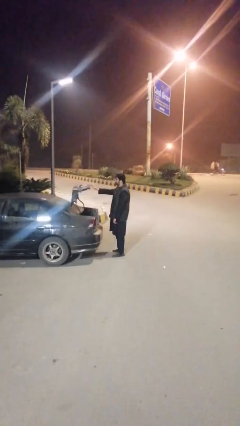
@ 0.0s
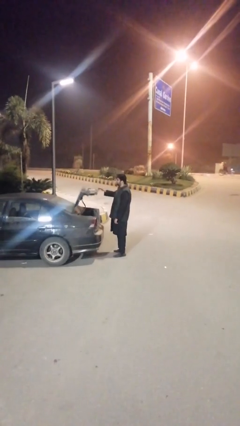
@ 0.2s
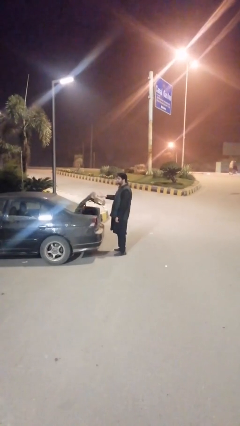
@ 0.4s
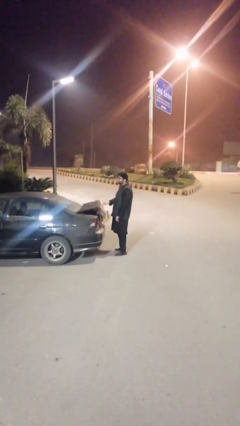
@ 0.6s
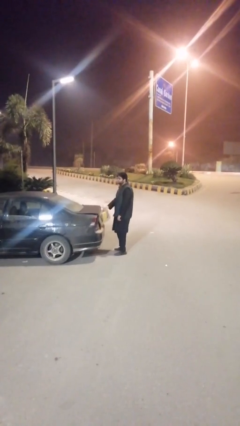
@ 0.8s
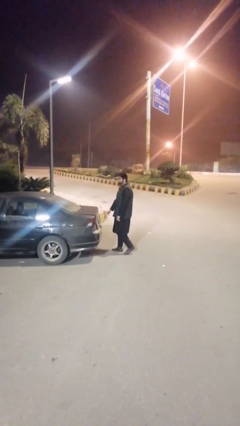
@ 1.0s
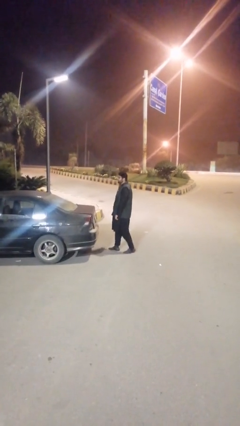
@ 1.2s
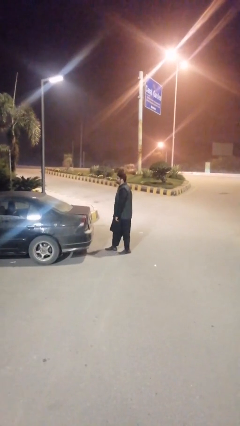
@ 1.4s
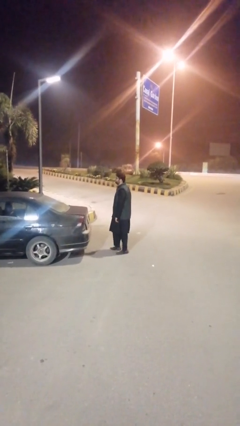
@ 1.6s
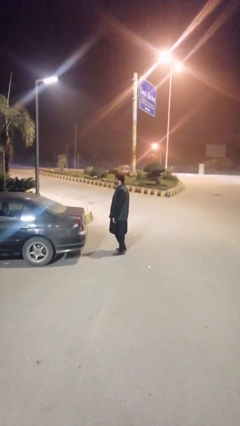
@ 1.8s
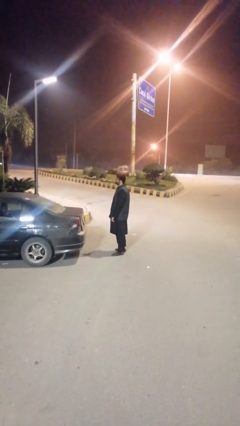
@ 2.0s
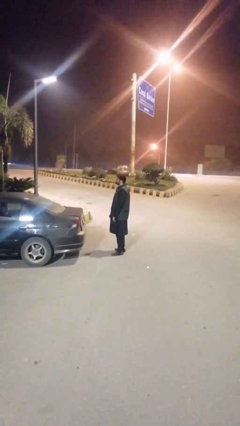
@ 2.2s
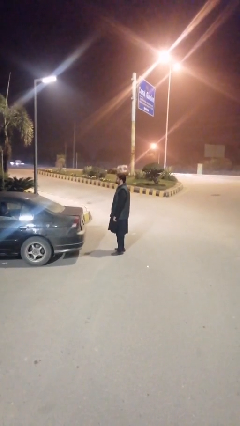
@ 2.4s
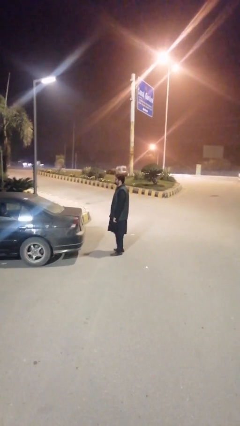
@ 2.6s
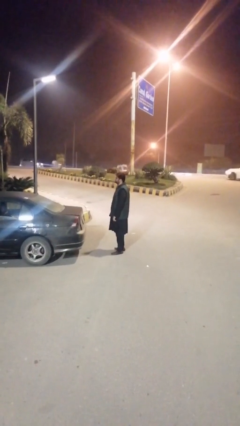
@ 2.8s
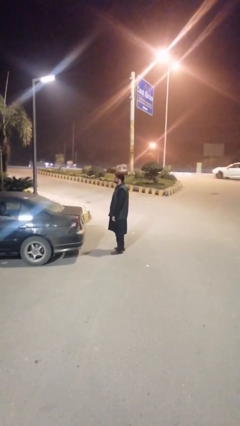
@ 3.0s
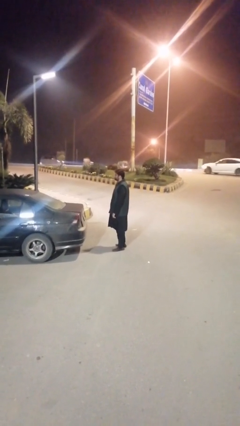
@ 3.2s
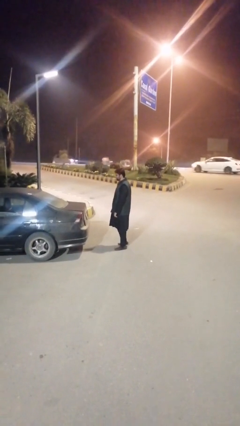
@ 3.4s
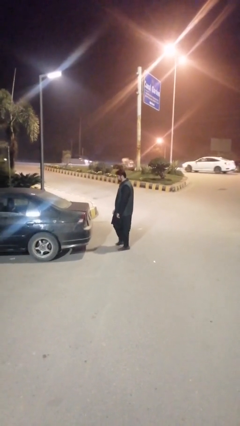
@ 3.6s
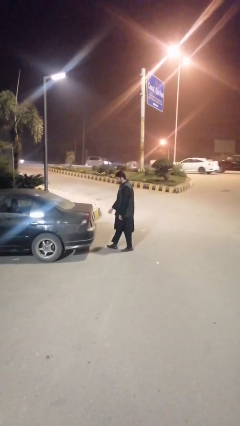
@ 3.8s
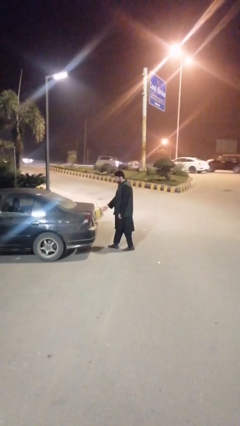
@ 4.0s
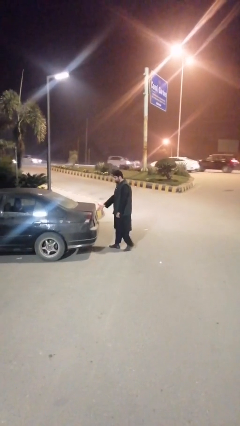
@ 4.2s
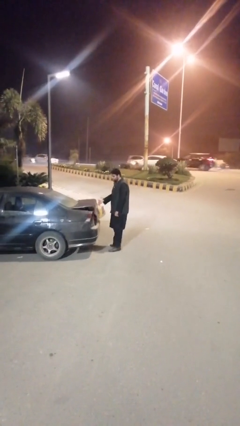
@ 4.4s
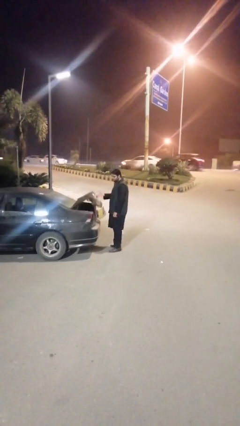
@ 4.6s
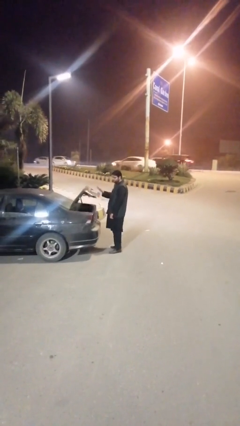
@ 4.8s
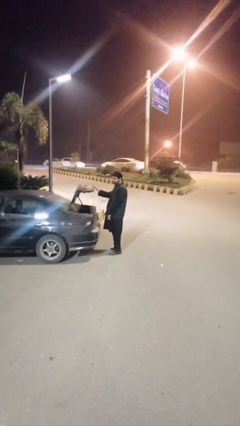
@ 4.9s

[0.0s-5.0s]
person closes car trunk

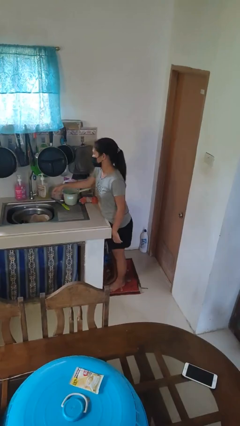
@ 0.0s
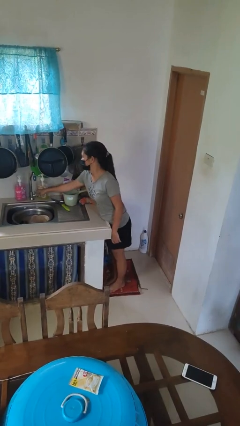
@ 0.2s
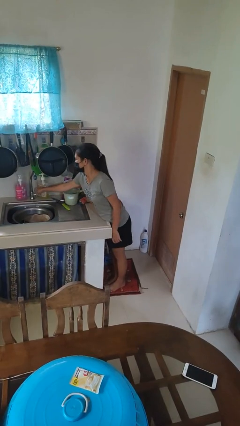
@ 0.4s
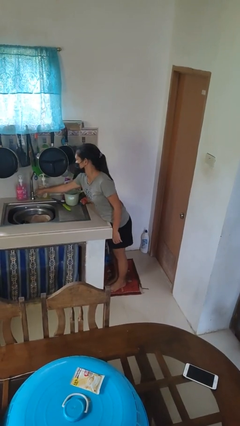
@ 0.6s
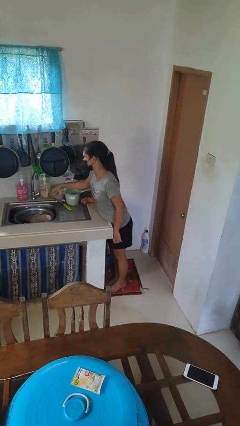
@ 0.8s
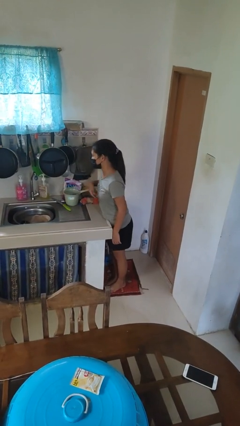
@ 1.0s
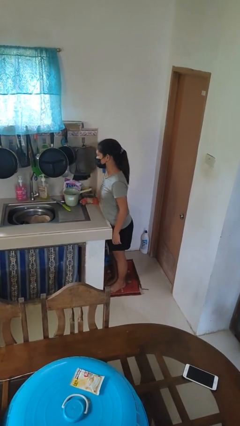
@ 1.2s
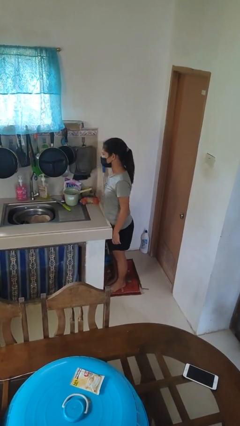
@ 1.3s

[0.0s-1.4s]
person turns off faucet

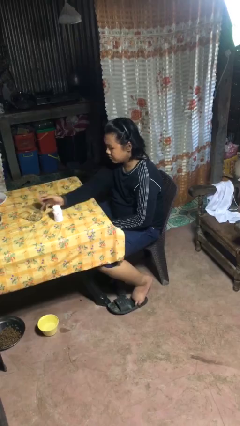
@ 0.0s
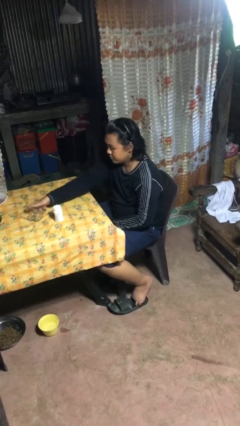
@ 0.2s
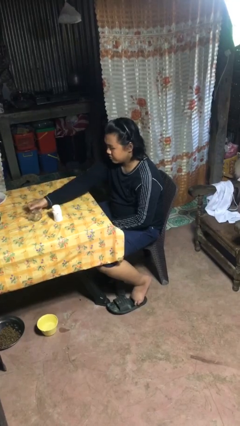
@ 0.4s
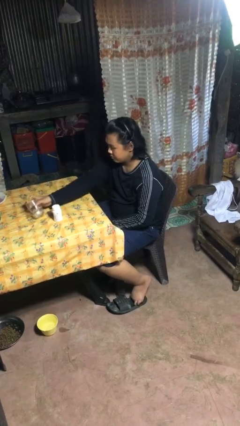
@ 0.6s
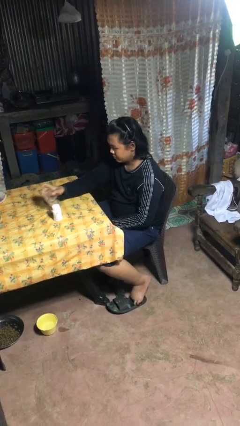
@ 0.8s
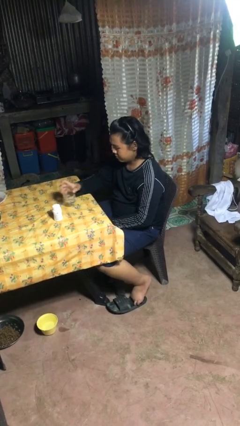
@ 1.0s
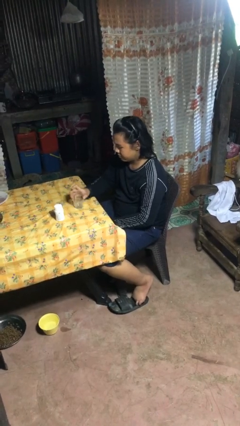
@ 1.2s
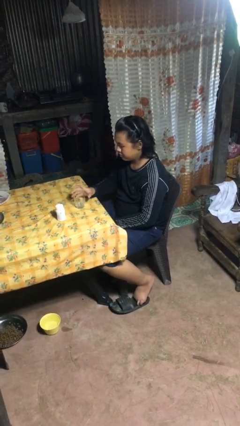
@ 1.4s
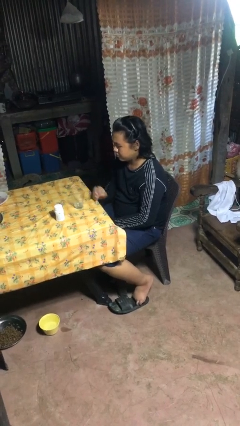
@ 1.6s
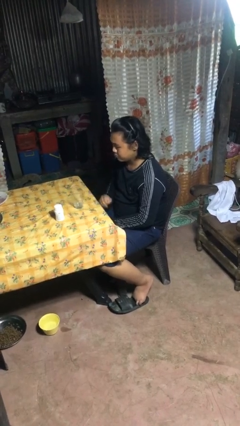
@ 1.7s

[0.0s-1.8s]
person sets upright glass

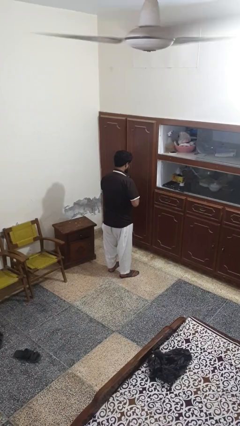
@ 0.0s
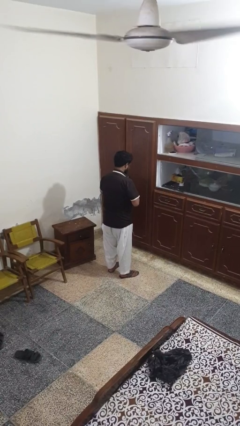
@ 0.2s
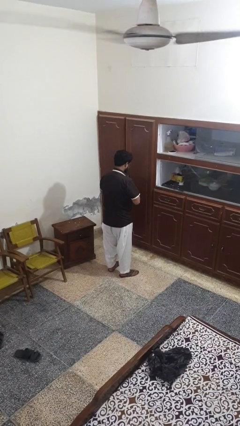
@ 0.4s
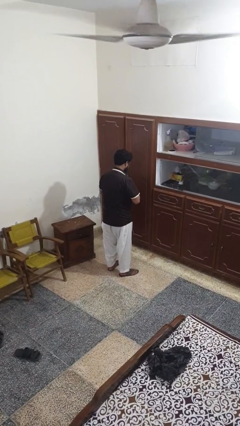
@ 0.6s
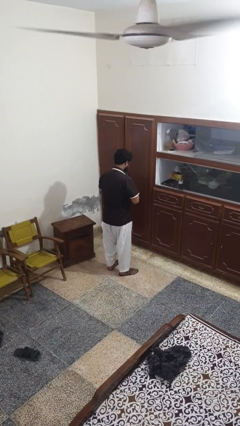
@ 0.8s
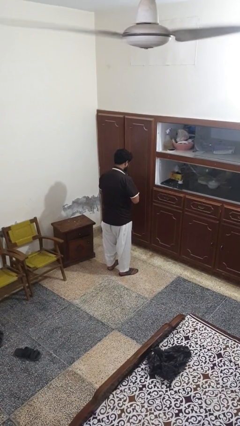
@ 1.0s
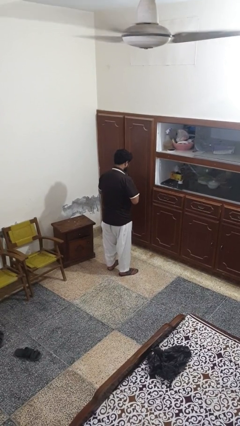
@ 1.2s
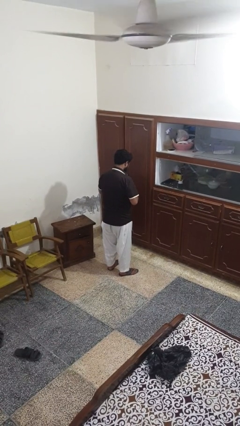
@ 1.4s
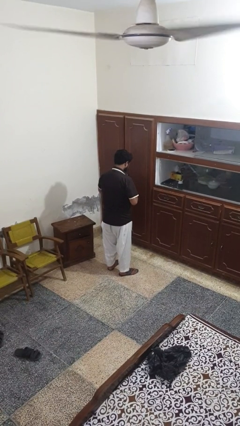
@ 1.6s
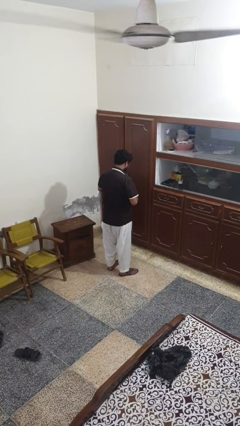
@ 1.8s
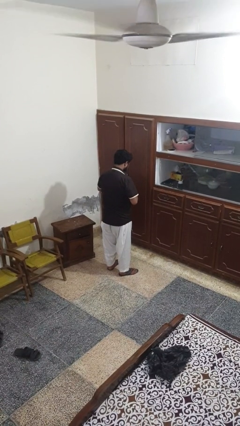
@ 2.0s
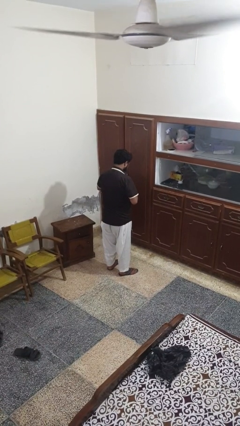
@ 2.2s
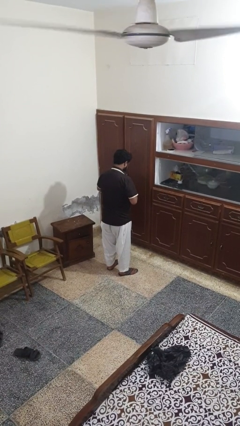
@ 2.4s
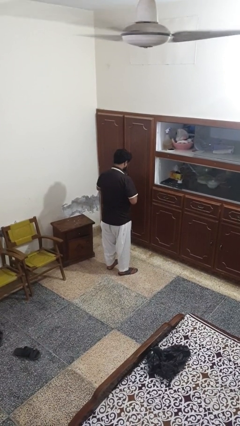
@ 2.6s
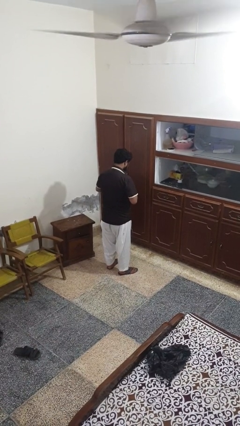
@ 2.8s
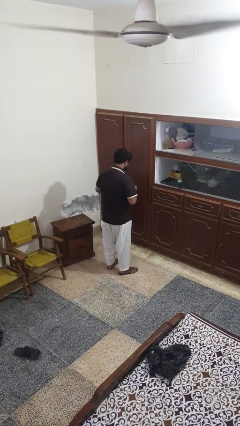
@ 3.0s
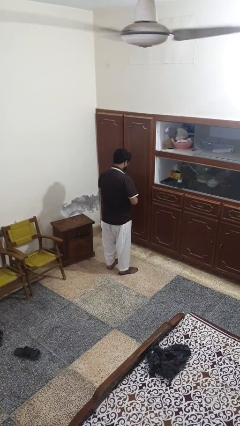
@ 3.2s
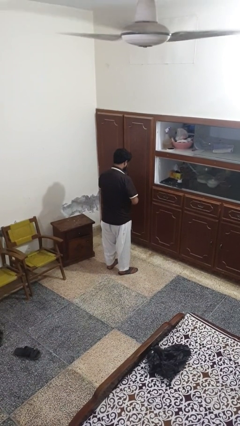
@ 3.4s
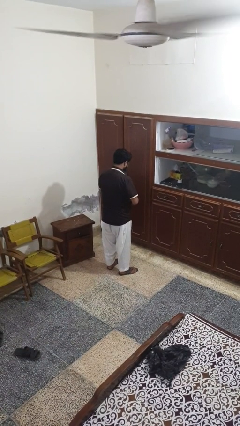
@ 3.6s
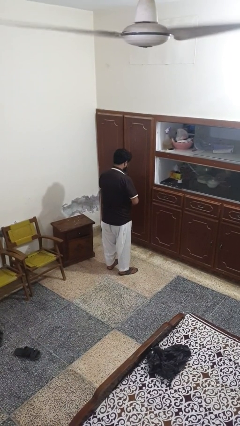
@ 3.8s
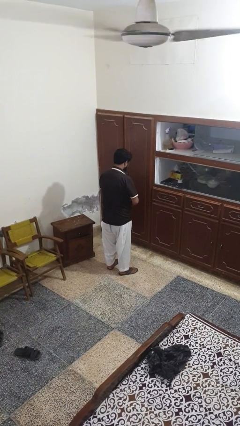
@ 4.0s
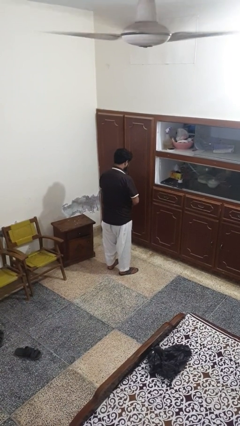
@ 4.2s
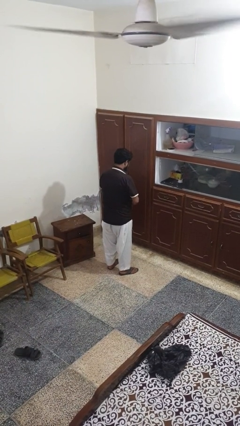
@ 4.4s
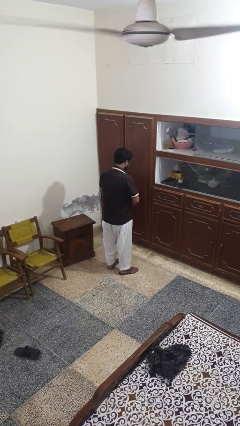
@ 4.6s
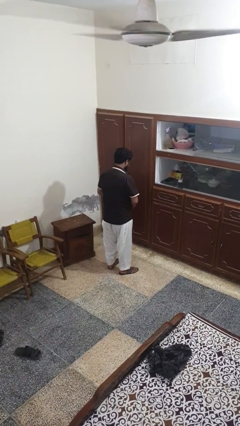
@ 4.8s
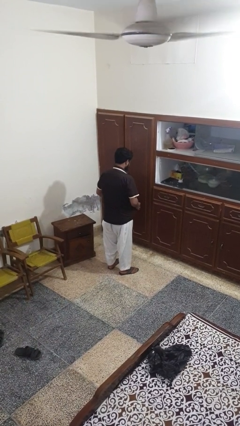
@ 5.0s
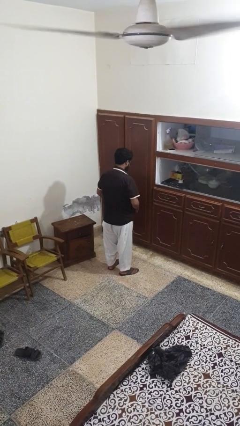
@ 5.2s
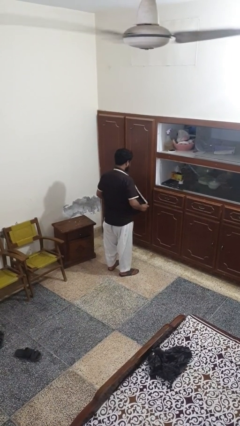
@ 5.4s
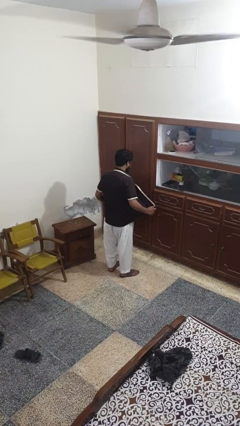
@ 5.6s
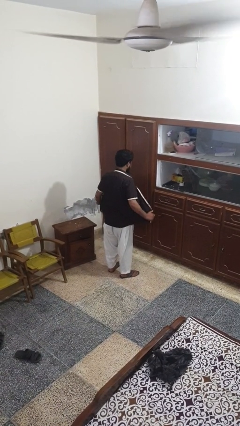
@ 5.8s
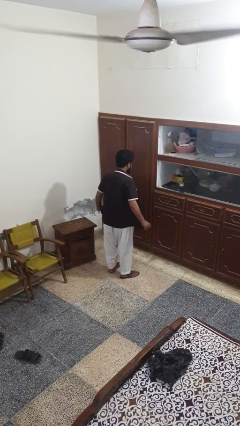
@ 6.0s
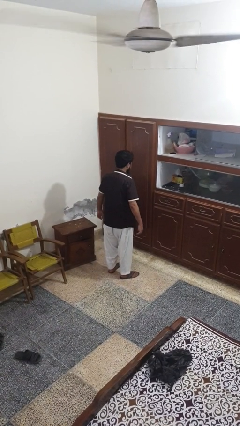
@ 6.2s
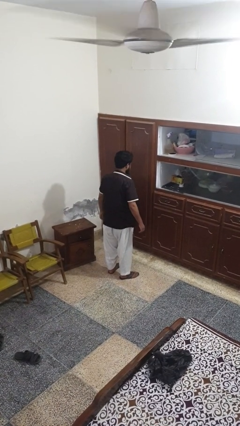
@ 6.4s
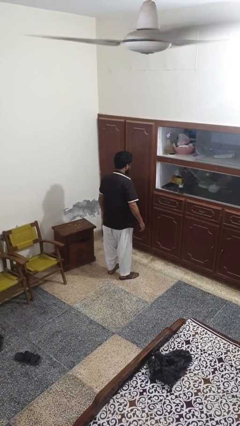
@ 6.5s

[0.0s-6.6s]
person unbuttons shirt

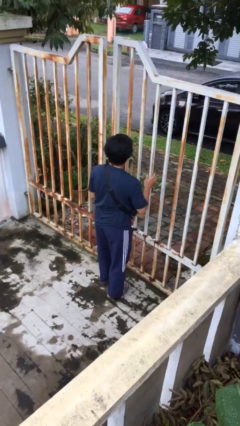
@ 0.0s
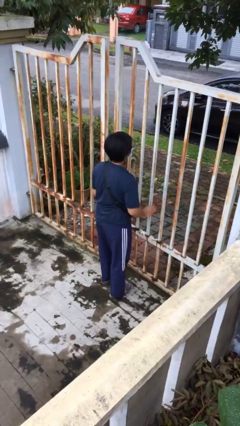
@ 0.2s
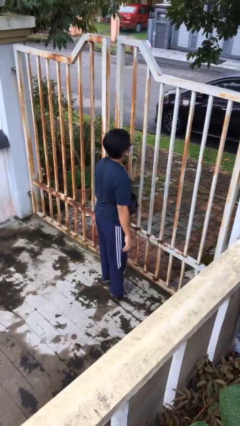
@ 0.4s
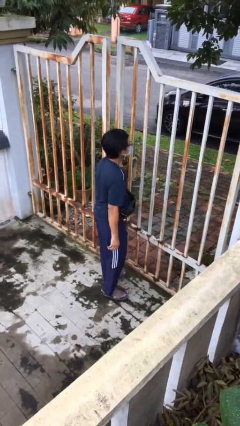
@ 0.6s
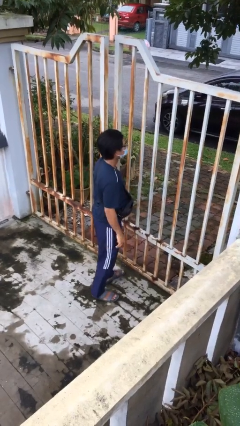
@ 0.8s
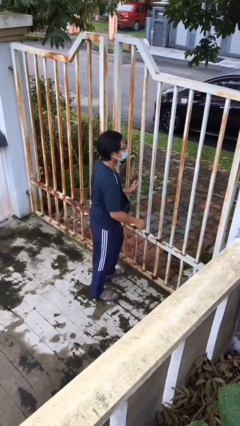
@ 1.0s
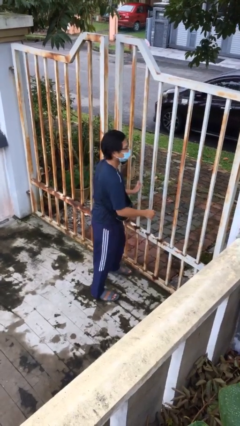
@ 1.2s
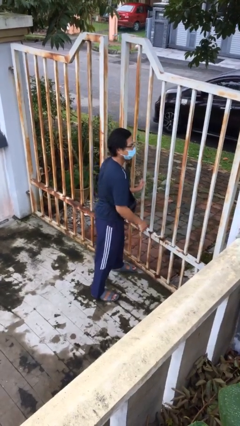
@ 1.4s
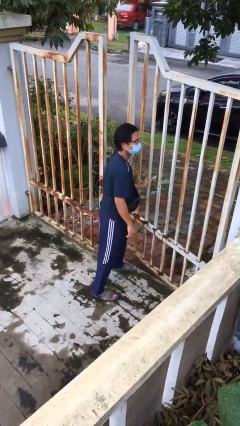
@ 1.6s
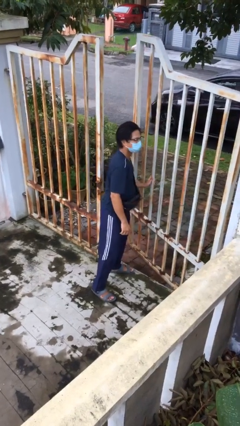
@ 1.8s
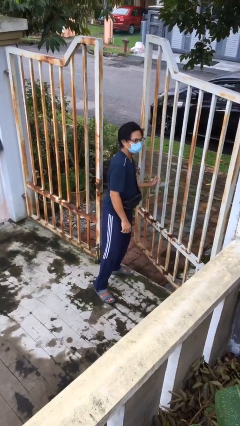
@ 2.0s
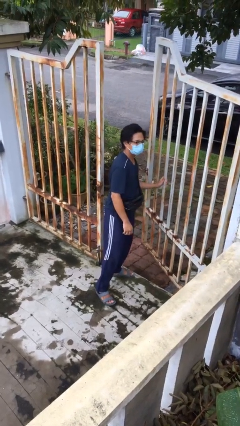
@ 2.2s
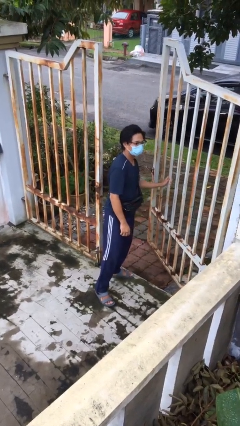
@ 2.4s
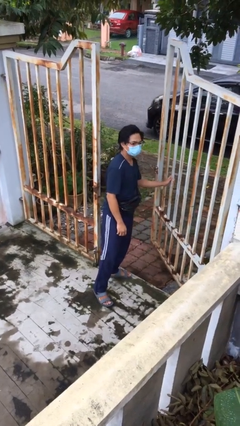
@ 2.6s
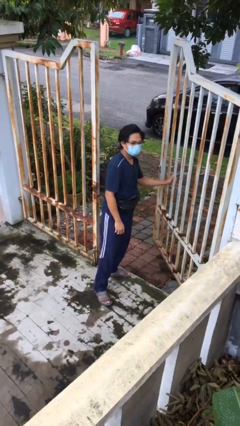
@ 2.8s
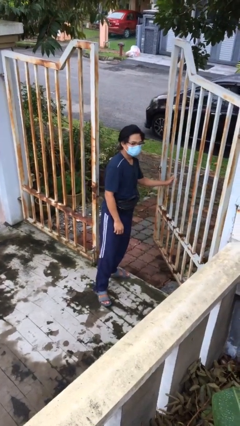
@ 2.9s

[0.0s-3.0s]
person opens facility door
